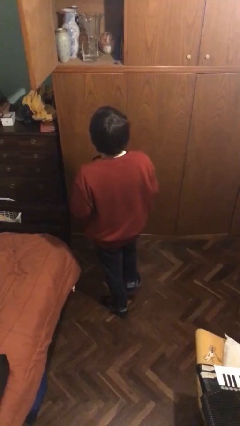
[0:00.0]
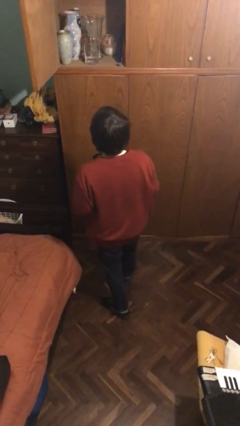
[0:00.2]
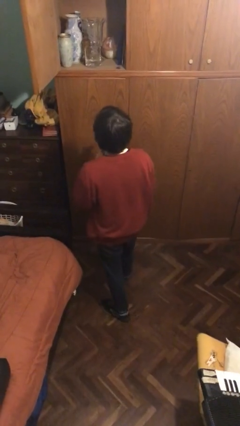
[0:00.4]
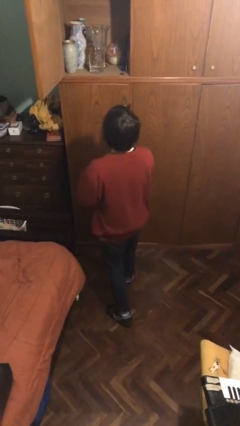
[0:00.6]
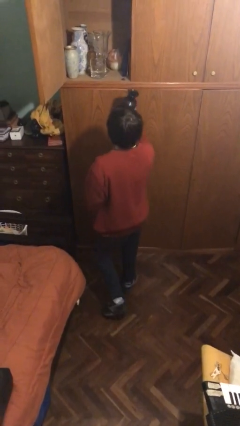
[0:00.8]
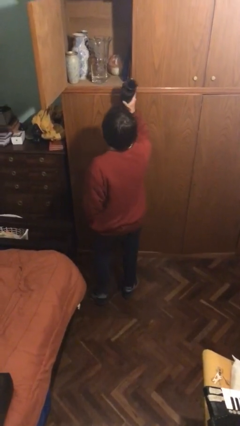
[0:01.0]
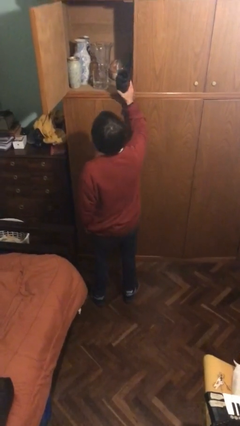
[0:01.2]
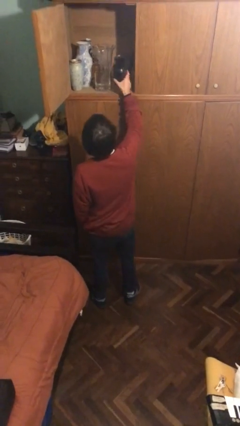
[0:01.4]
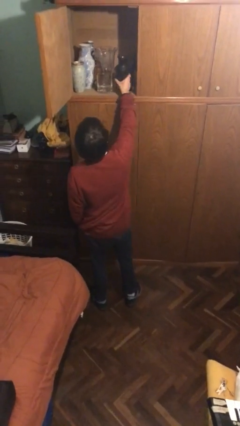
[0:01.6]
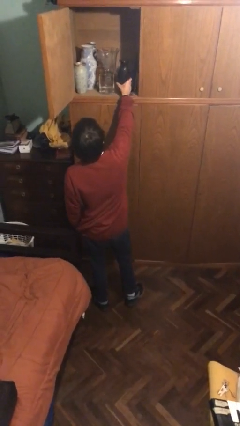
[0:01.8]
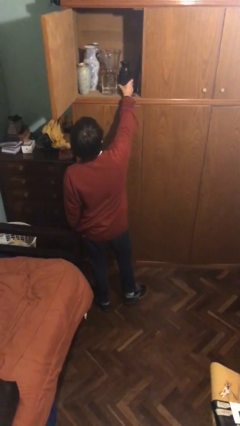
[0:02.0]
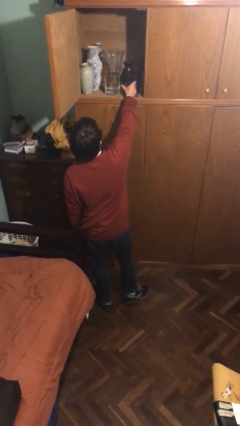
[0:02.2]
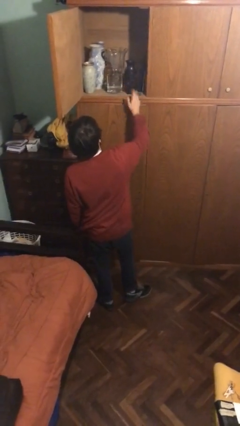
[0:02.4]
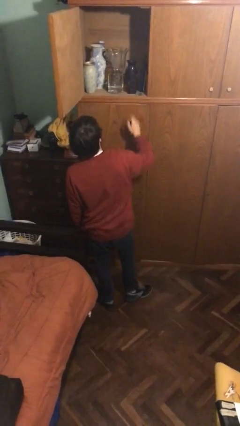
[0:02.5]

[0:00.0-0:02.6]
person puts down object into cabinet

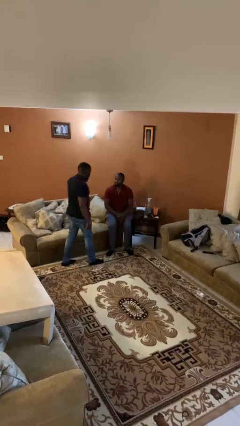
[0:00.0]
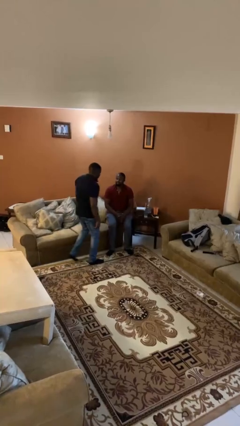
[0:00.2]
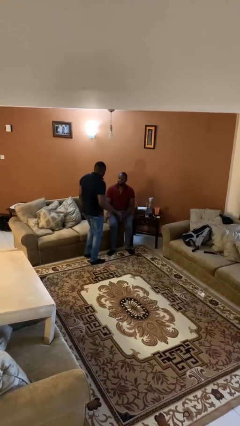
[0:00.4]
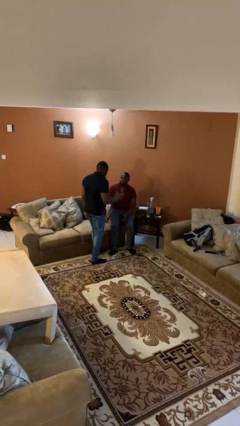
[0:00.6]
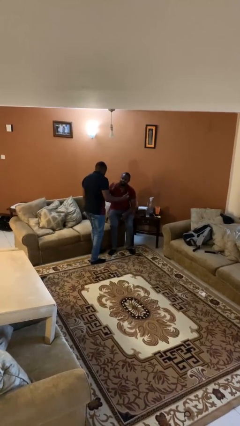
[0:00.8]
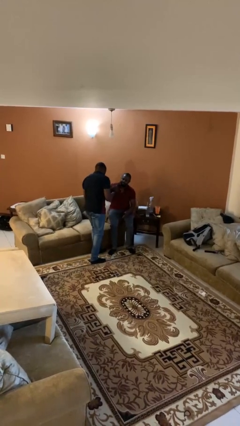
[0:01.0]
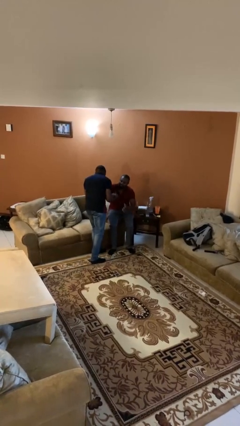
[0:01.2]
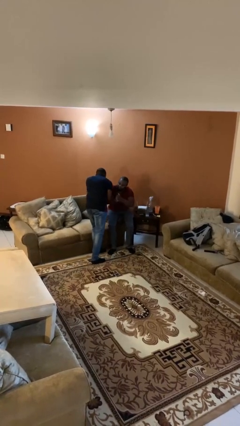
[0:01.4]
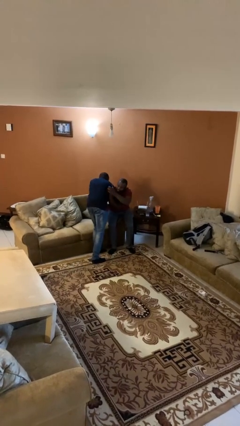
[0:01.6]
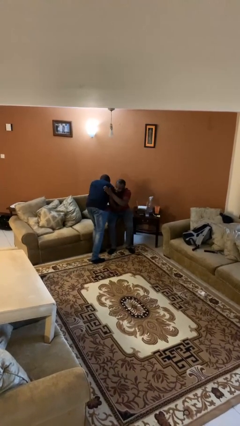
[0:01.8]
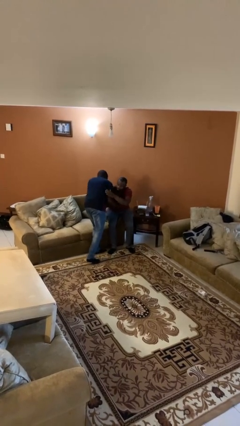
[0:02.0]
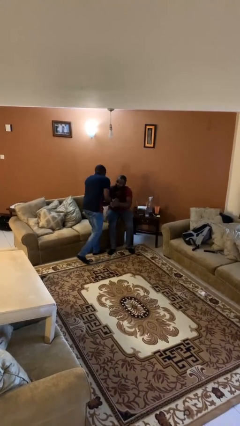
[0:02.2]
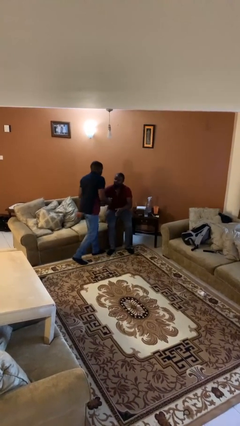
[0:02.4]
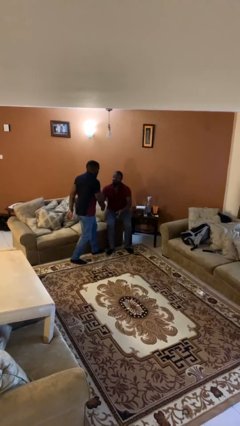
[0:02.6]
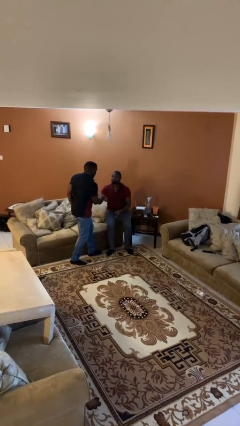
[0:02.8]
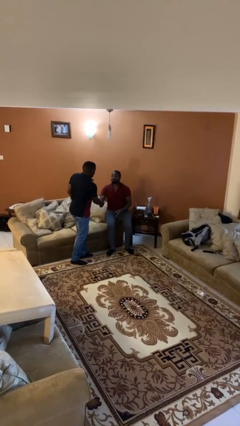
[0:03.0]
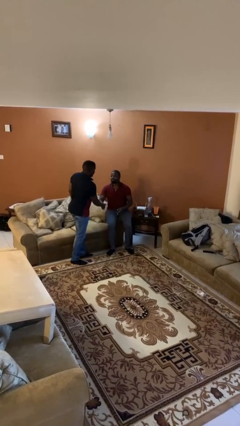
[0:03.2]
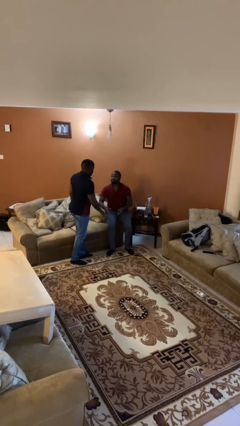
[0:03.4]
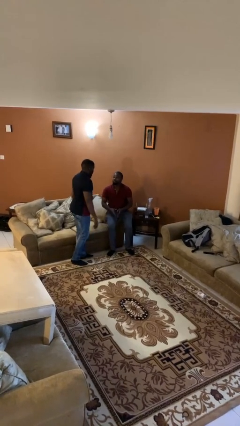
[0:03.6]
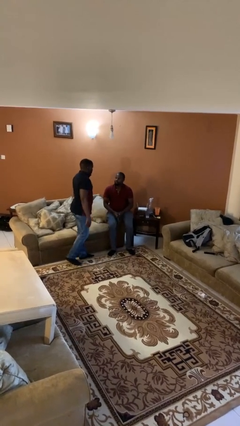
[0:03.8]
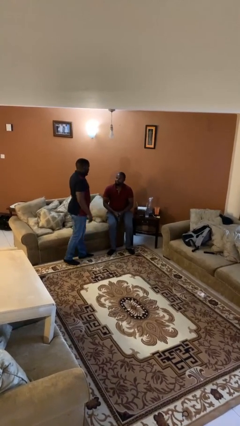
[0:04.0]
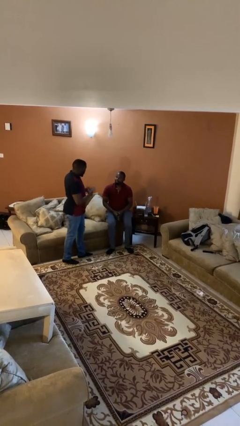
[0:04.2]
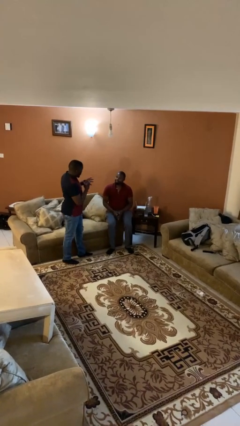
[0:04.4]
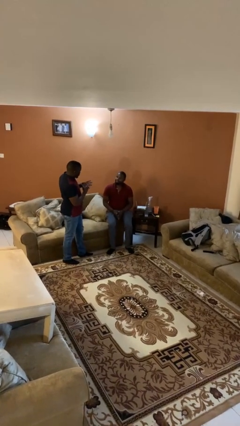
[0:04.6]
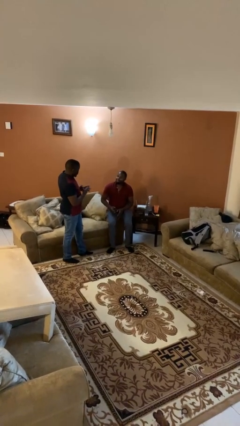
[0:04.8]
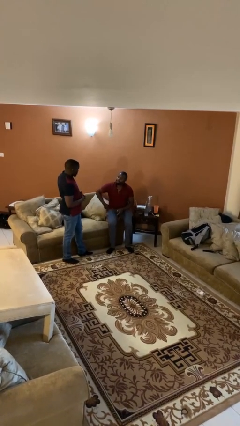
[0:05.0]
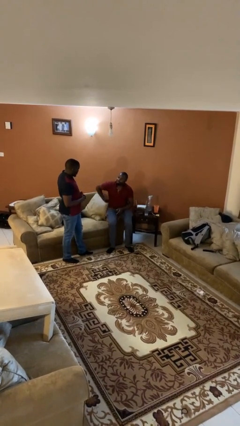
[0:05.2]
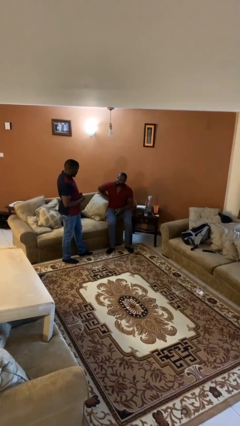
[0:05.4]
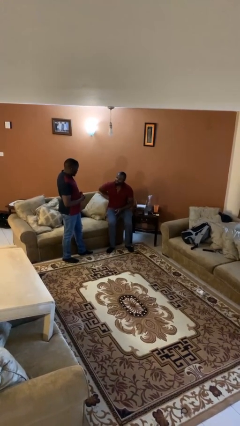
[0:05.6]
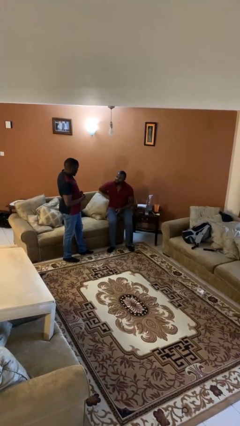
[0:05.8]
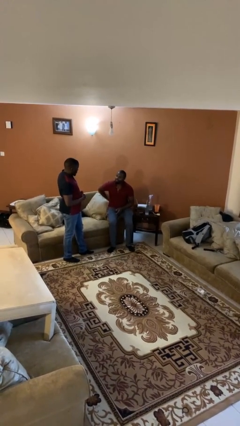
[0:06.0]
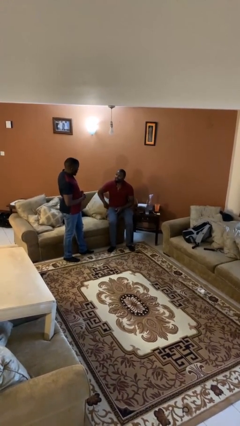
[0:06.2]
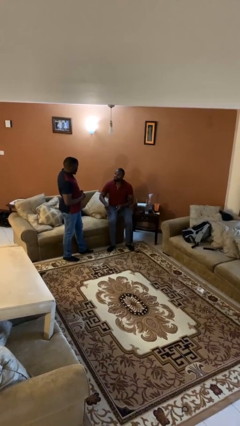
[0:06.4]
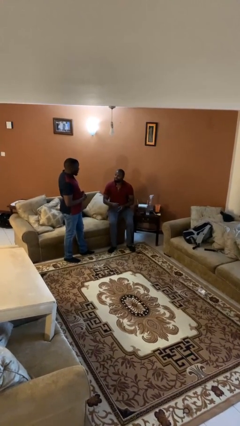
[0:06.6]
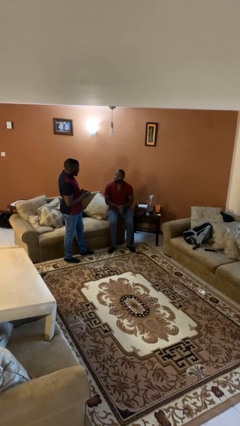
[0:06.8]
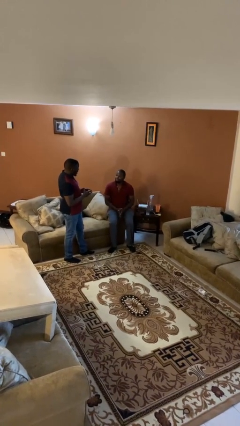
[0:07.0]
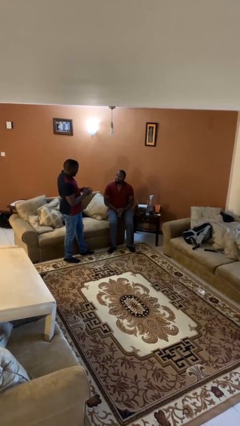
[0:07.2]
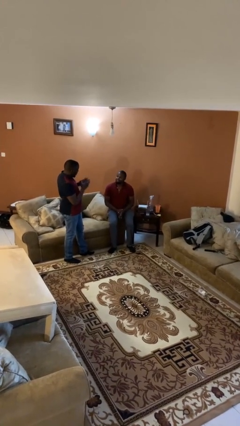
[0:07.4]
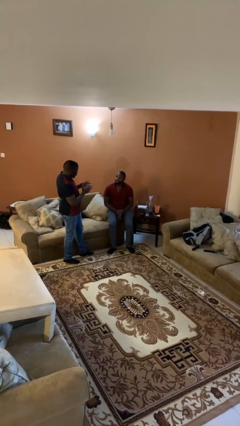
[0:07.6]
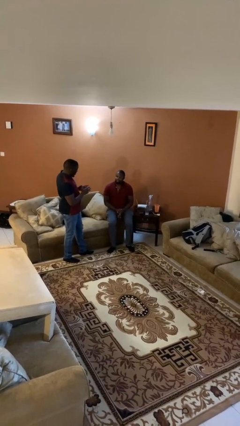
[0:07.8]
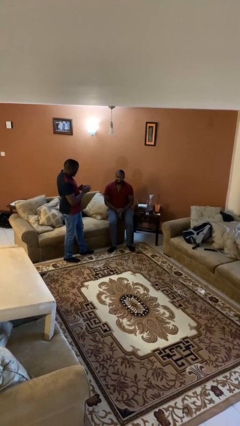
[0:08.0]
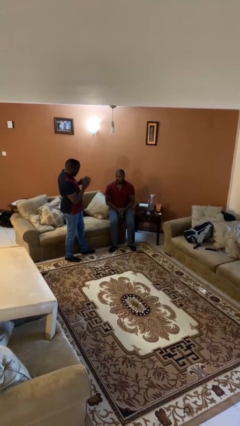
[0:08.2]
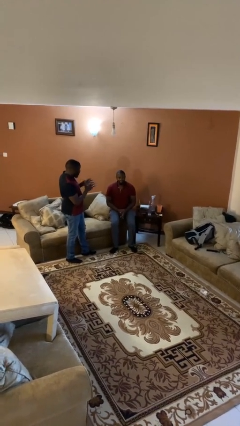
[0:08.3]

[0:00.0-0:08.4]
person embraces person

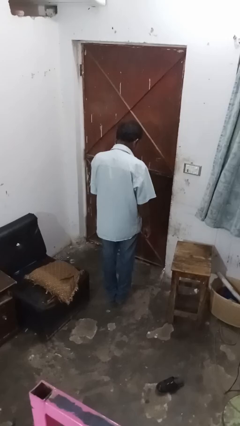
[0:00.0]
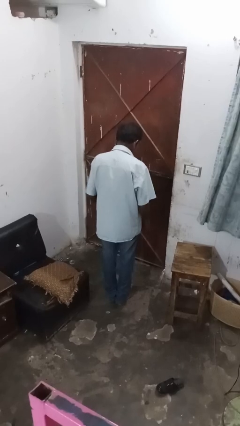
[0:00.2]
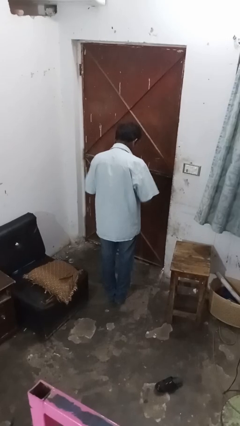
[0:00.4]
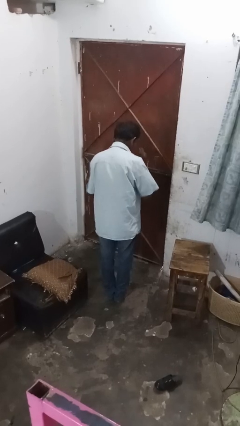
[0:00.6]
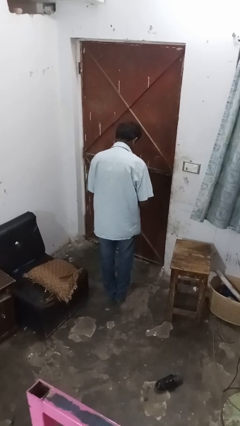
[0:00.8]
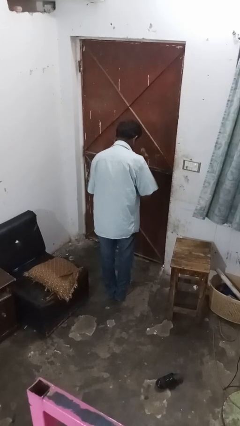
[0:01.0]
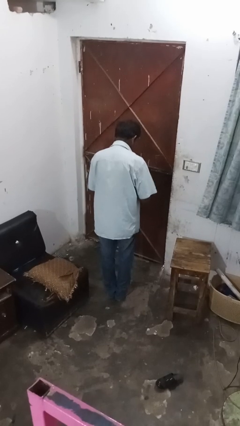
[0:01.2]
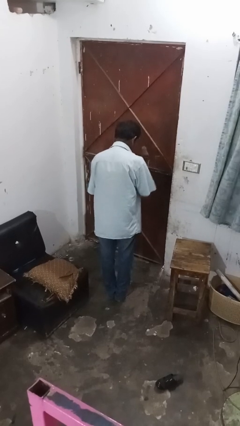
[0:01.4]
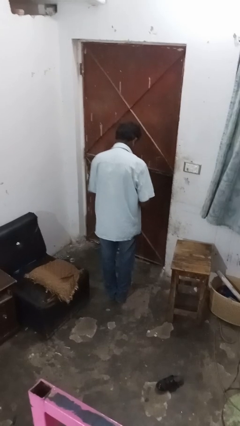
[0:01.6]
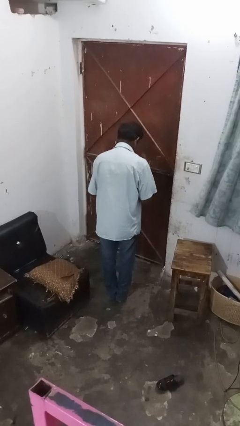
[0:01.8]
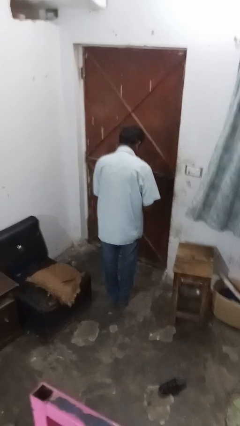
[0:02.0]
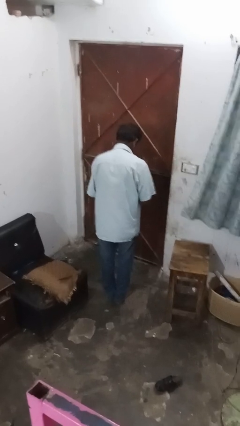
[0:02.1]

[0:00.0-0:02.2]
person drums on chest

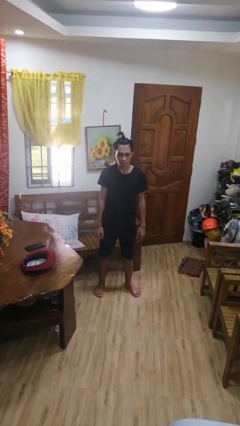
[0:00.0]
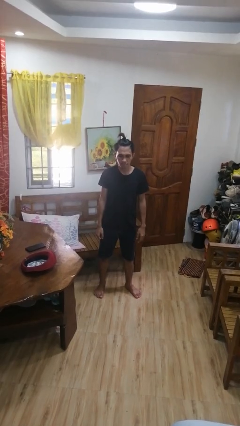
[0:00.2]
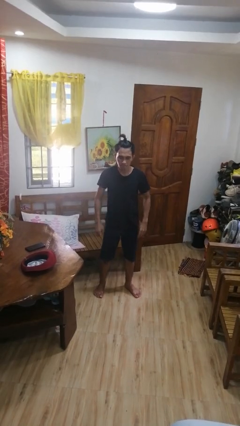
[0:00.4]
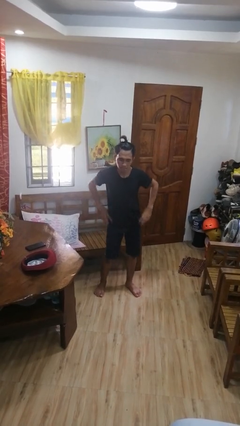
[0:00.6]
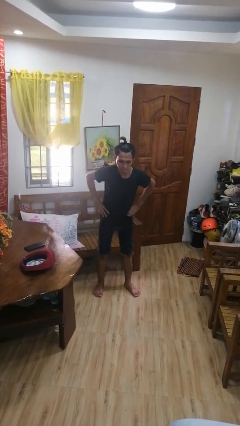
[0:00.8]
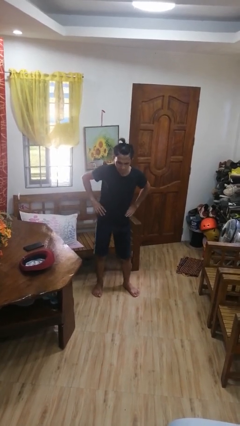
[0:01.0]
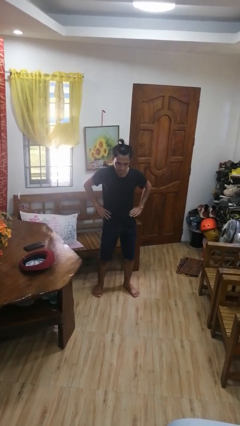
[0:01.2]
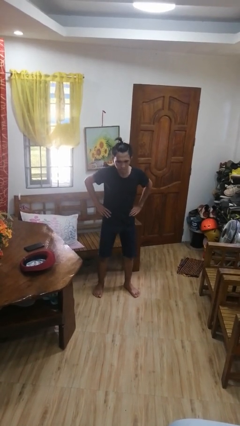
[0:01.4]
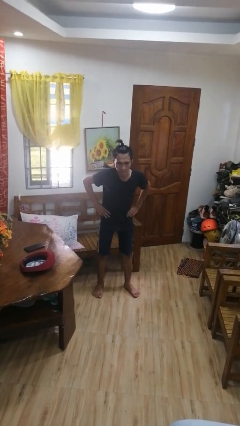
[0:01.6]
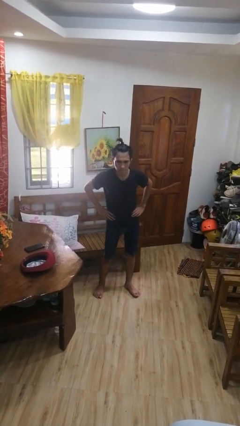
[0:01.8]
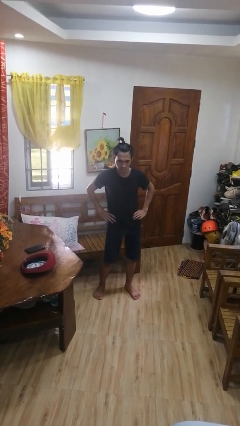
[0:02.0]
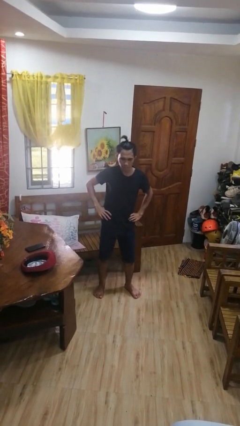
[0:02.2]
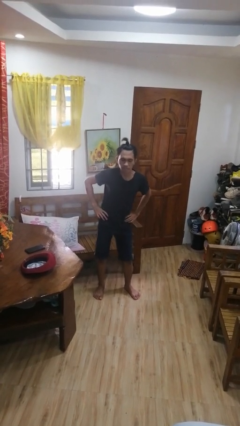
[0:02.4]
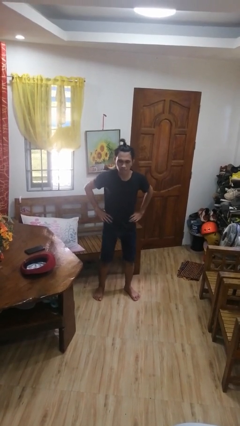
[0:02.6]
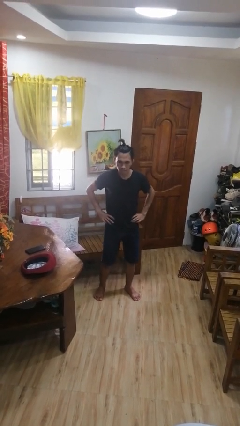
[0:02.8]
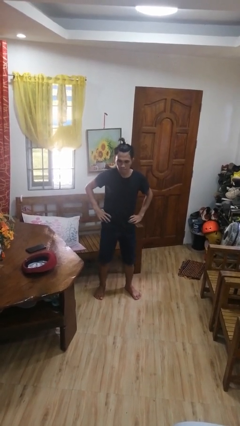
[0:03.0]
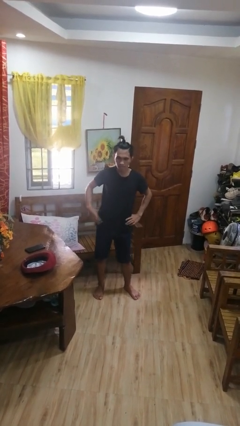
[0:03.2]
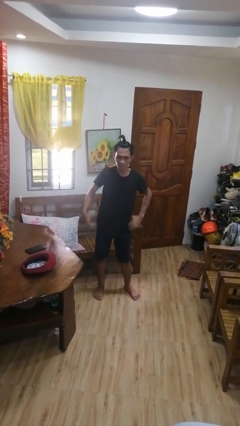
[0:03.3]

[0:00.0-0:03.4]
person wiggles hips

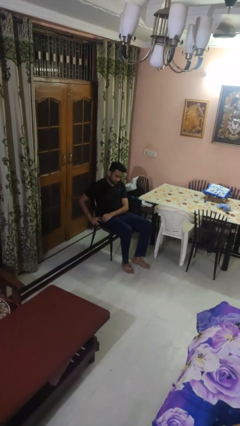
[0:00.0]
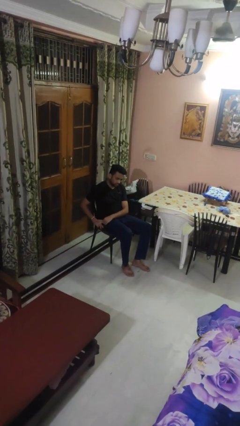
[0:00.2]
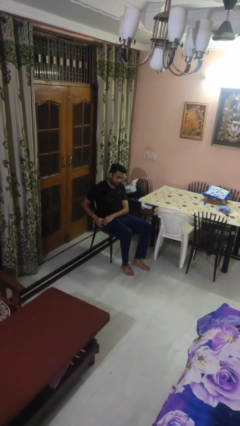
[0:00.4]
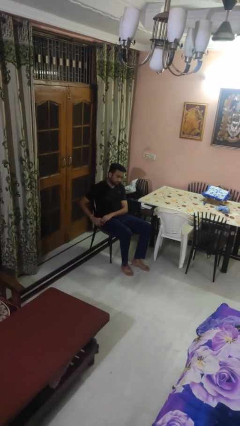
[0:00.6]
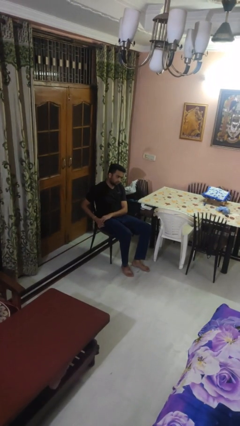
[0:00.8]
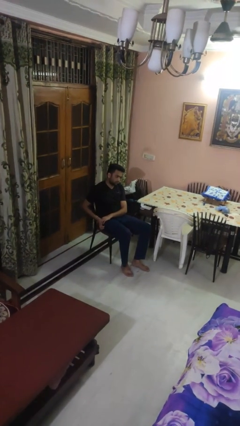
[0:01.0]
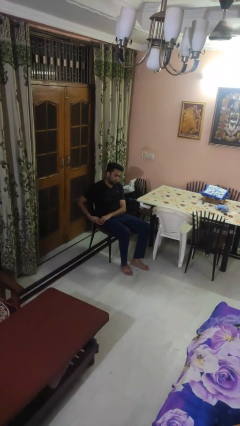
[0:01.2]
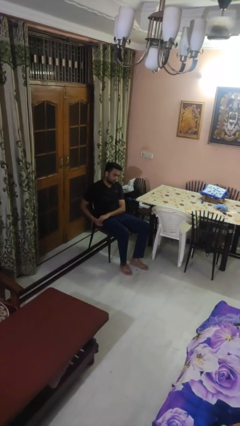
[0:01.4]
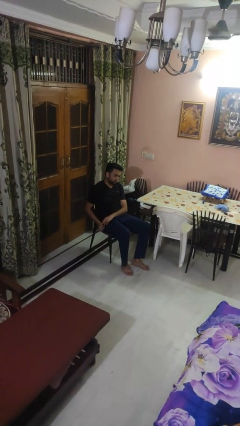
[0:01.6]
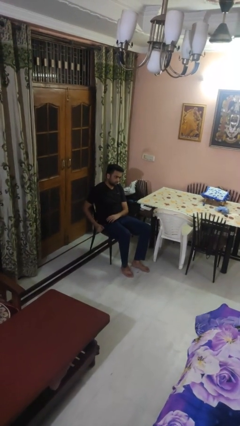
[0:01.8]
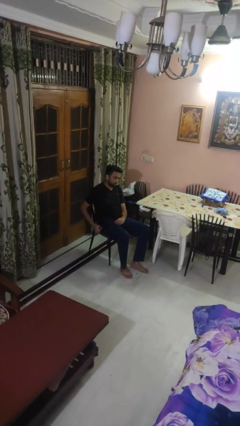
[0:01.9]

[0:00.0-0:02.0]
person puts phone into pocket
